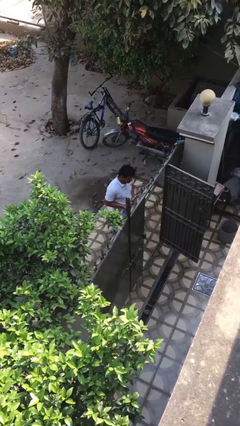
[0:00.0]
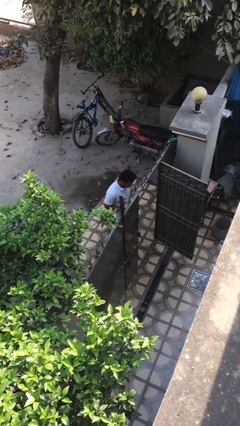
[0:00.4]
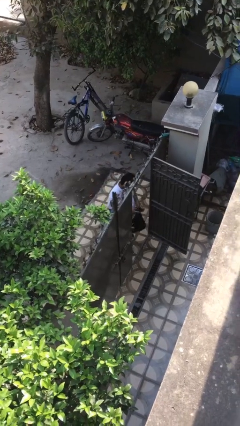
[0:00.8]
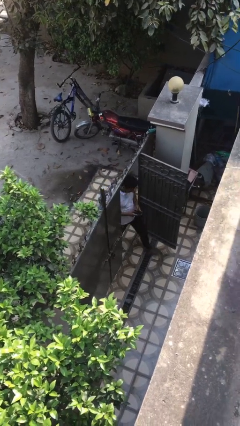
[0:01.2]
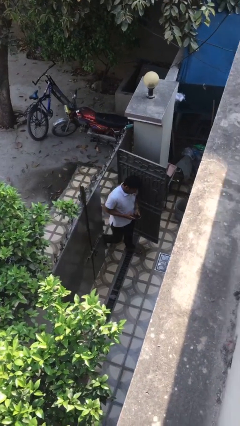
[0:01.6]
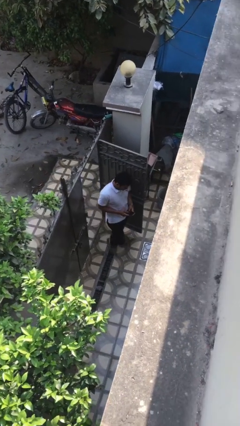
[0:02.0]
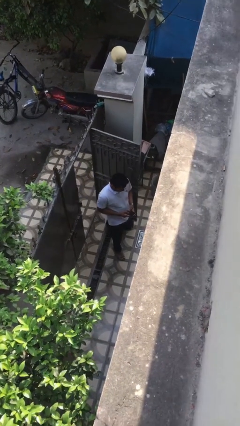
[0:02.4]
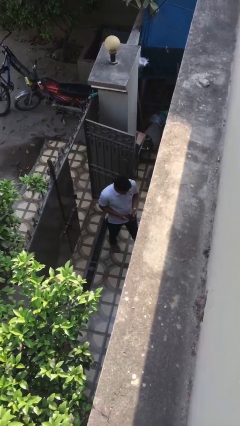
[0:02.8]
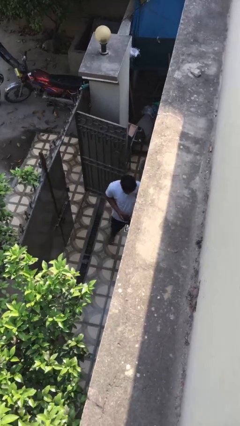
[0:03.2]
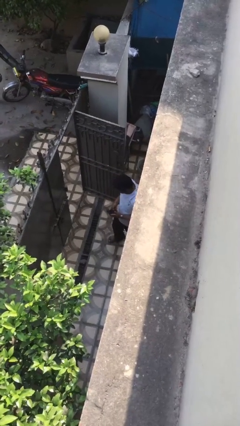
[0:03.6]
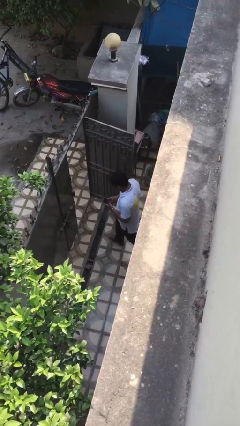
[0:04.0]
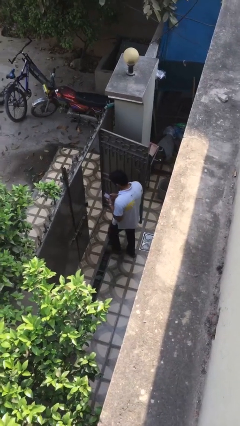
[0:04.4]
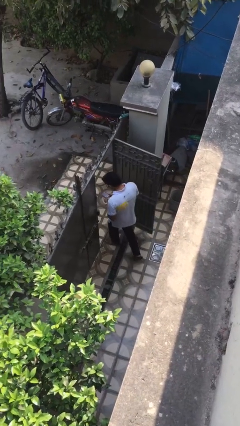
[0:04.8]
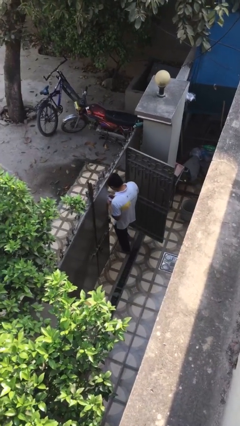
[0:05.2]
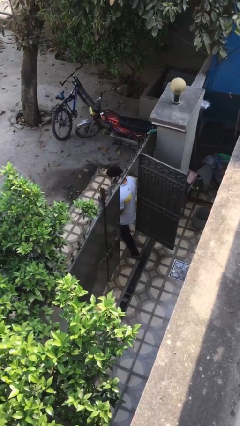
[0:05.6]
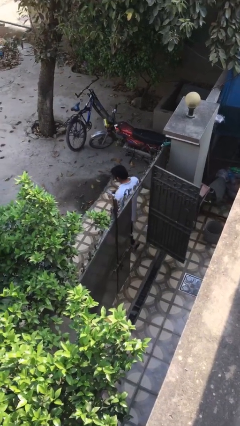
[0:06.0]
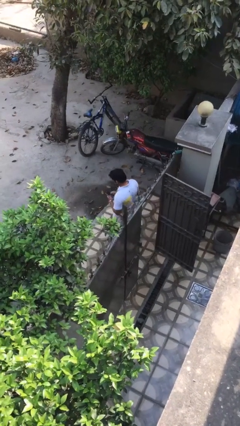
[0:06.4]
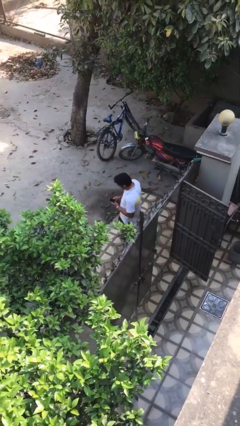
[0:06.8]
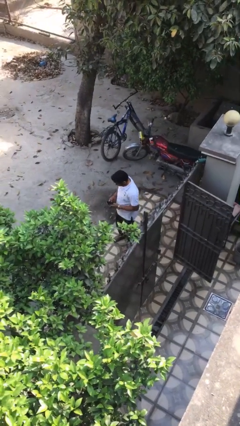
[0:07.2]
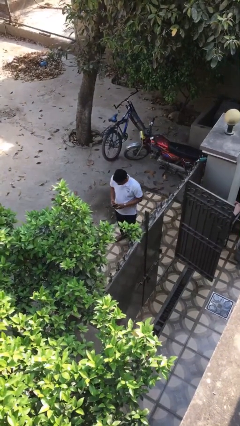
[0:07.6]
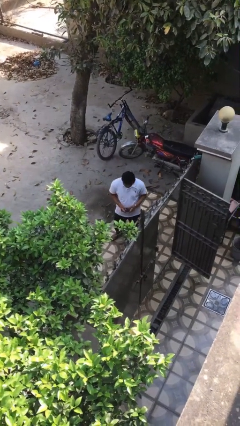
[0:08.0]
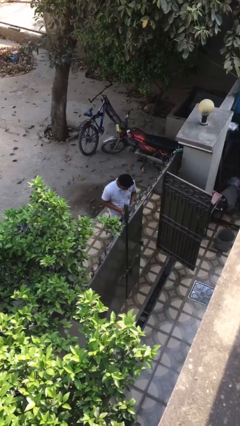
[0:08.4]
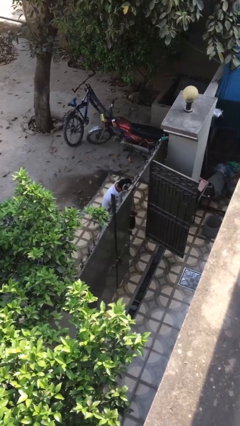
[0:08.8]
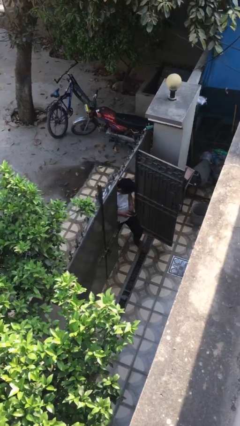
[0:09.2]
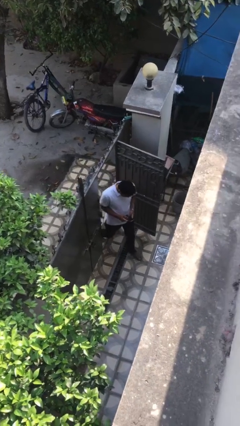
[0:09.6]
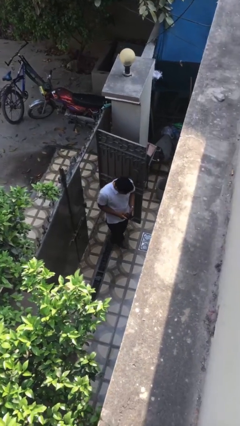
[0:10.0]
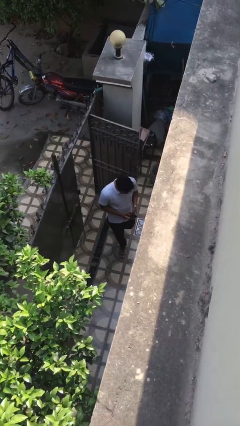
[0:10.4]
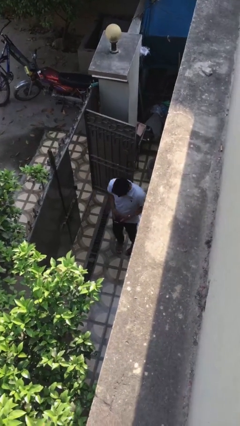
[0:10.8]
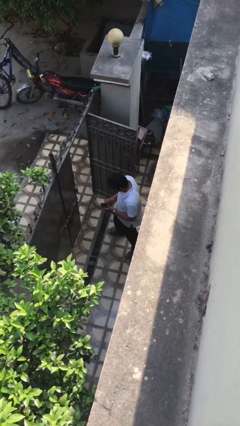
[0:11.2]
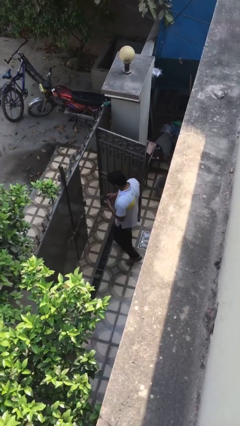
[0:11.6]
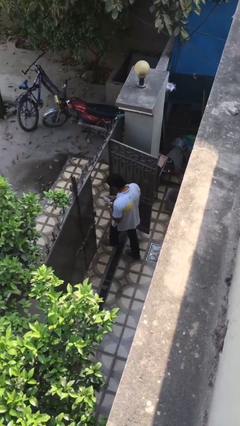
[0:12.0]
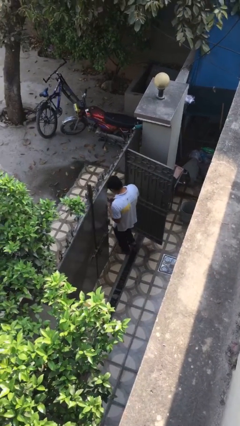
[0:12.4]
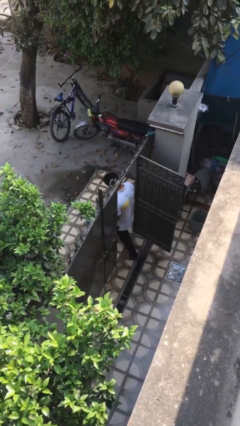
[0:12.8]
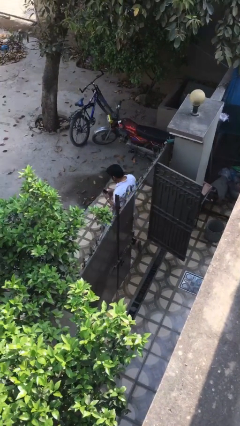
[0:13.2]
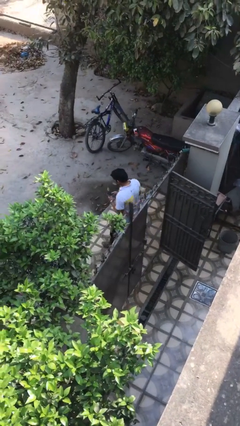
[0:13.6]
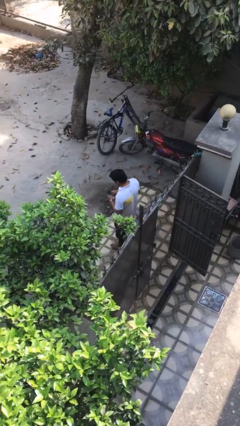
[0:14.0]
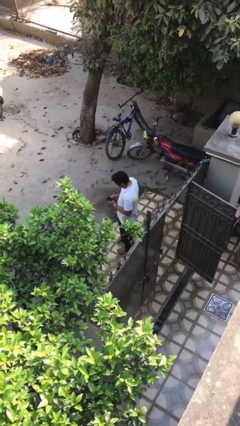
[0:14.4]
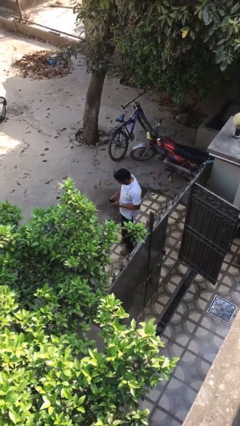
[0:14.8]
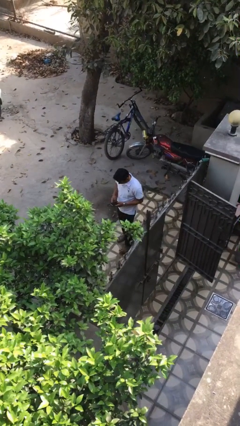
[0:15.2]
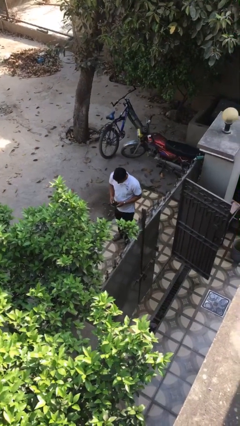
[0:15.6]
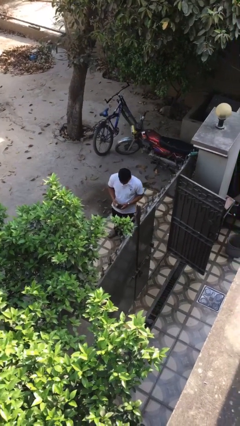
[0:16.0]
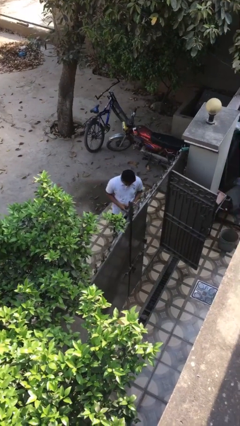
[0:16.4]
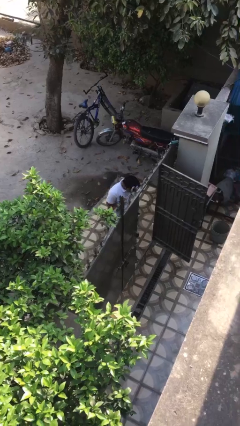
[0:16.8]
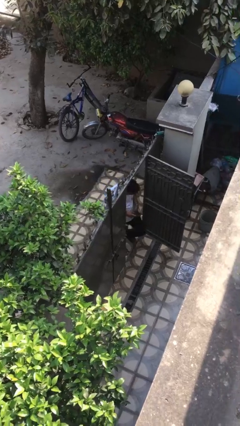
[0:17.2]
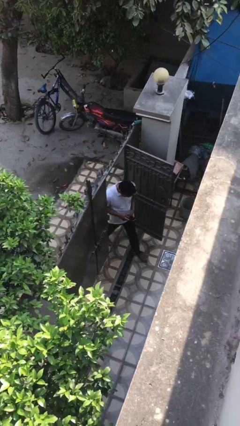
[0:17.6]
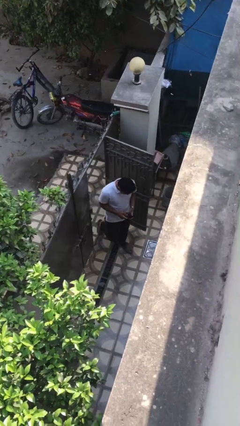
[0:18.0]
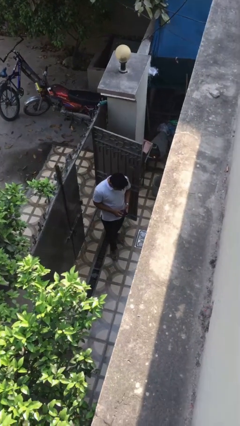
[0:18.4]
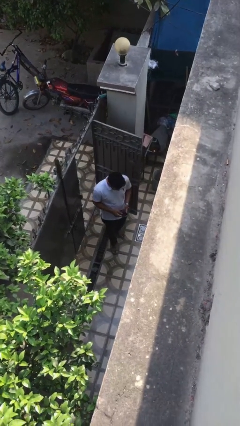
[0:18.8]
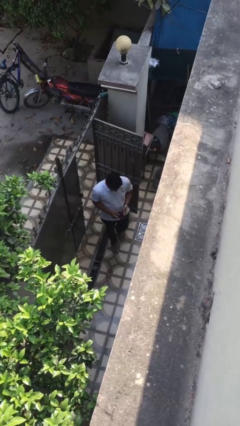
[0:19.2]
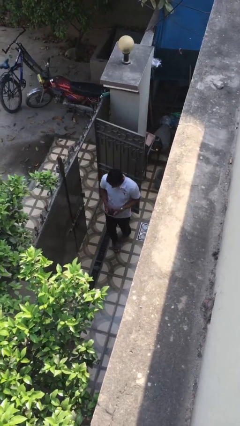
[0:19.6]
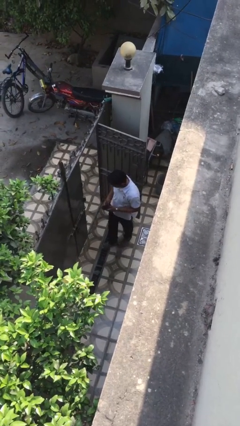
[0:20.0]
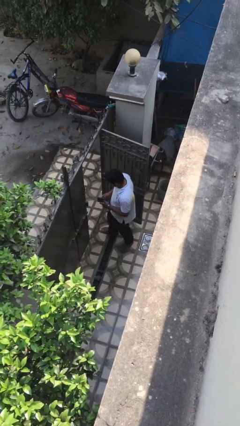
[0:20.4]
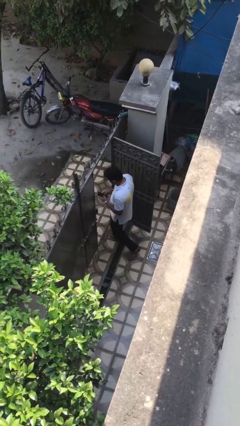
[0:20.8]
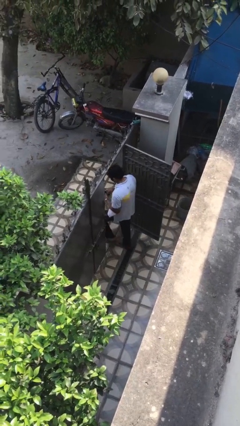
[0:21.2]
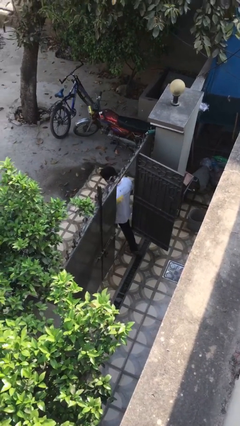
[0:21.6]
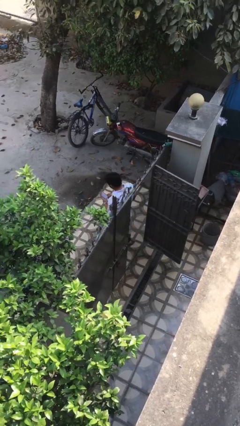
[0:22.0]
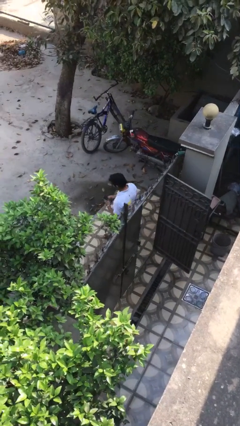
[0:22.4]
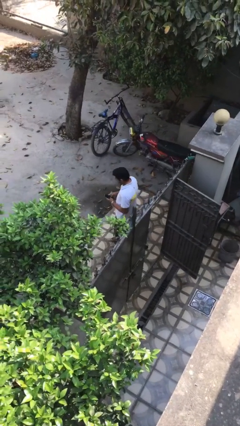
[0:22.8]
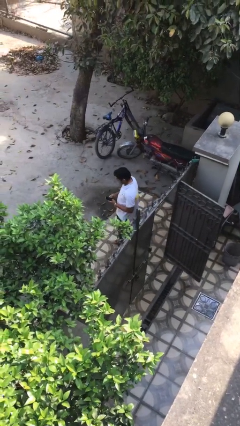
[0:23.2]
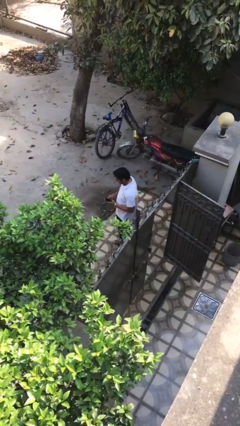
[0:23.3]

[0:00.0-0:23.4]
person texts on phone

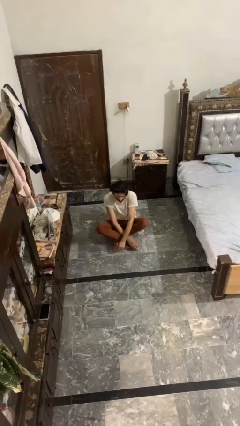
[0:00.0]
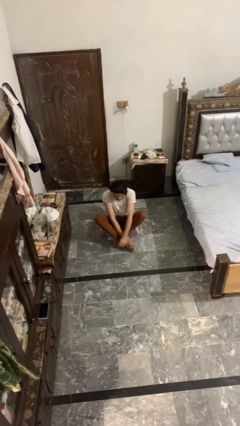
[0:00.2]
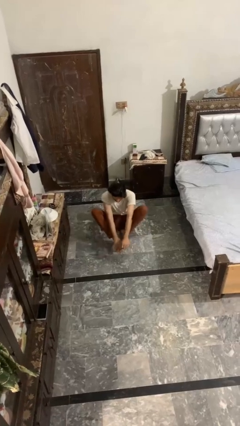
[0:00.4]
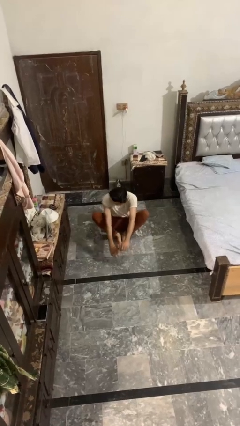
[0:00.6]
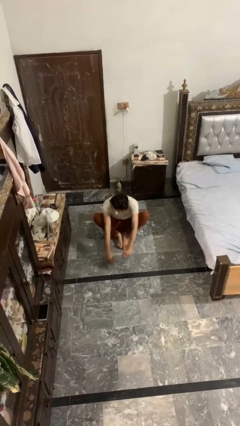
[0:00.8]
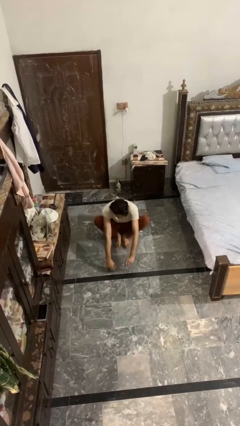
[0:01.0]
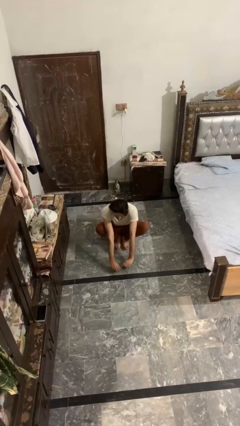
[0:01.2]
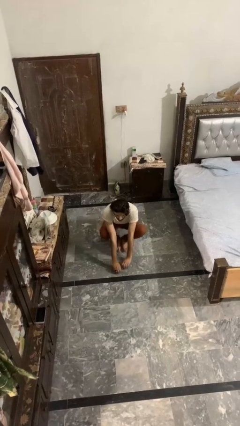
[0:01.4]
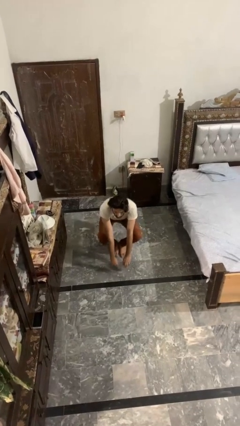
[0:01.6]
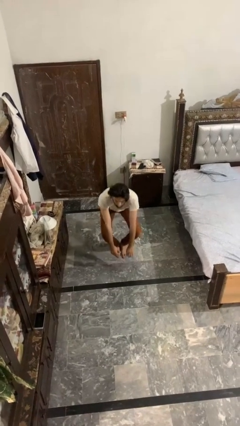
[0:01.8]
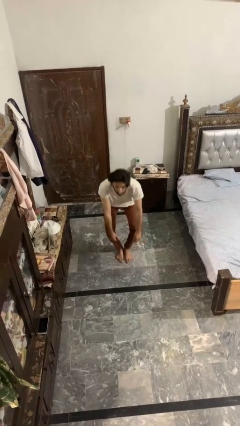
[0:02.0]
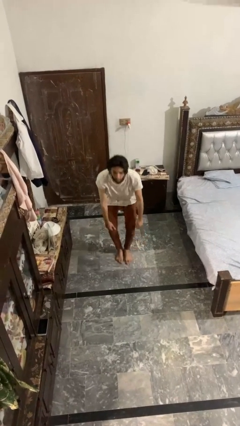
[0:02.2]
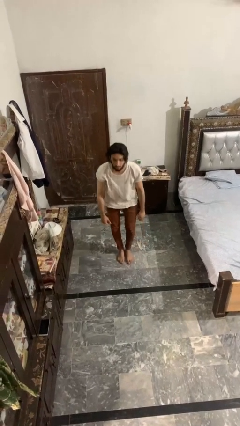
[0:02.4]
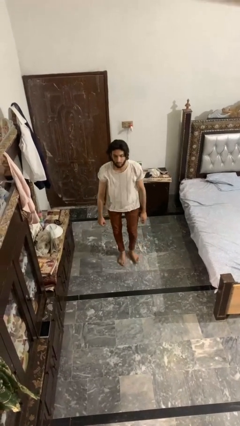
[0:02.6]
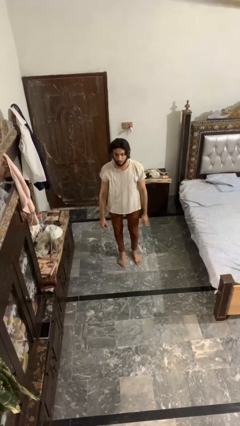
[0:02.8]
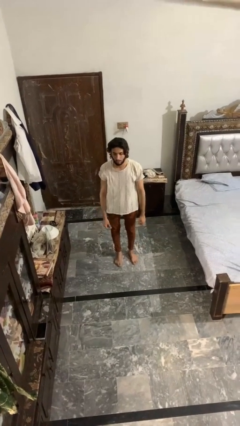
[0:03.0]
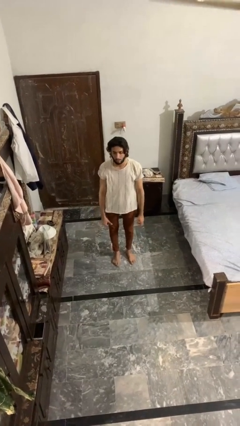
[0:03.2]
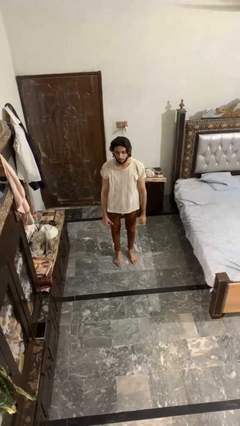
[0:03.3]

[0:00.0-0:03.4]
person stands up from floor

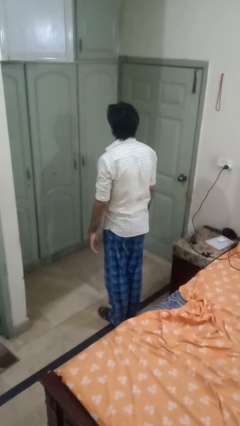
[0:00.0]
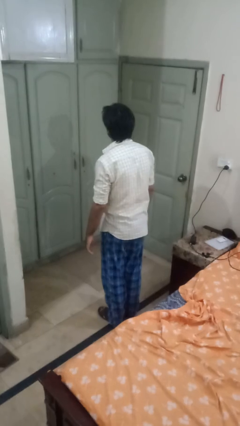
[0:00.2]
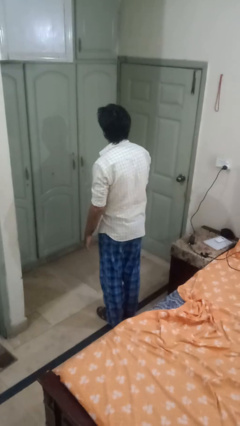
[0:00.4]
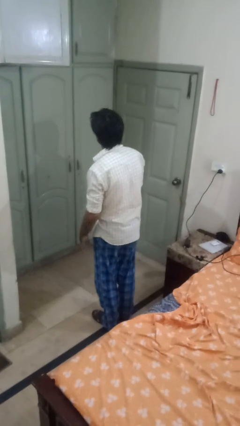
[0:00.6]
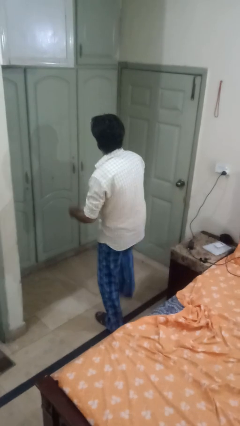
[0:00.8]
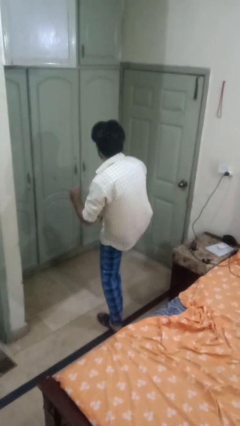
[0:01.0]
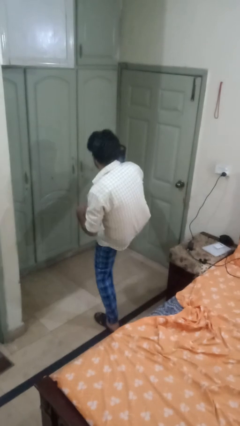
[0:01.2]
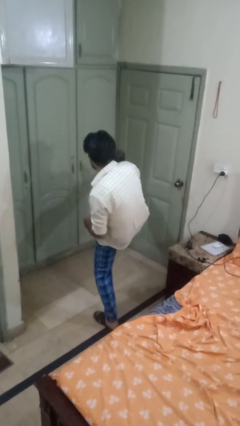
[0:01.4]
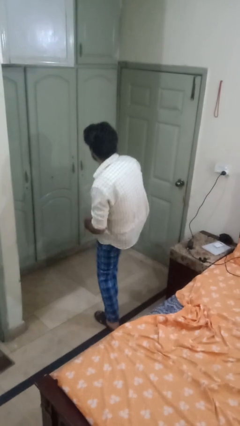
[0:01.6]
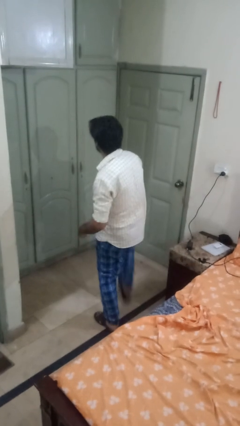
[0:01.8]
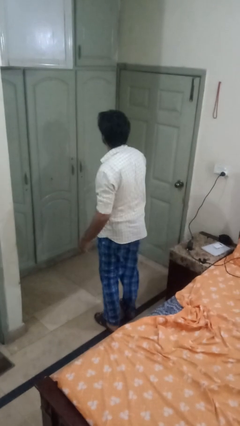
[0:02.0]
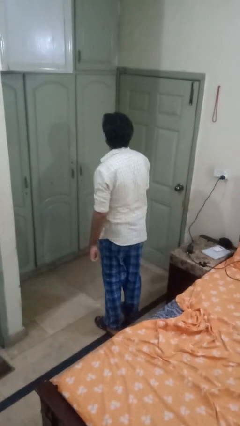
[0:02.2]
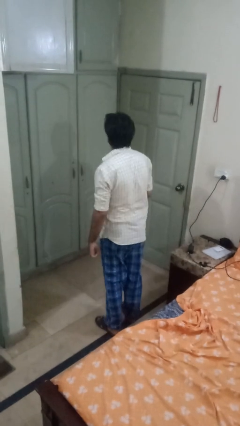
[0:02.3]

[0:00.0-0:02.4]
person karate kicks
